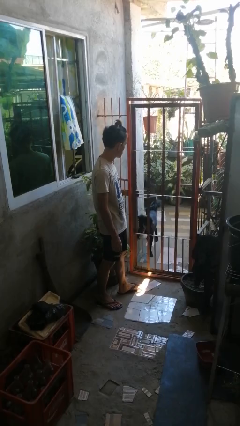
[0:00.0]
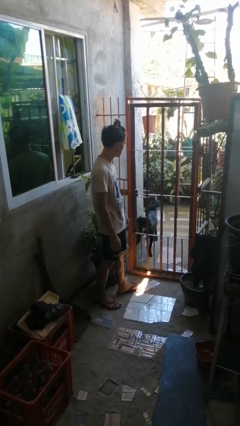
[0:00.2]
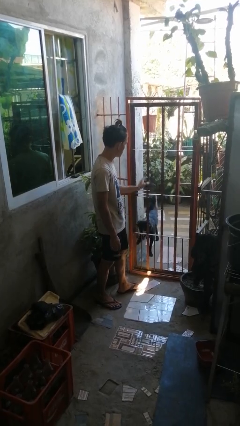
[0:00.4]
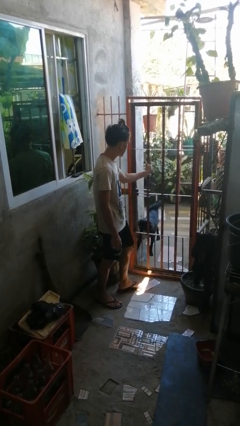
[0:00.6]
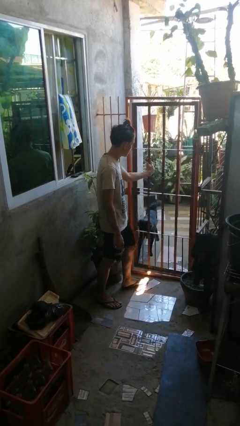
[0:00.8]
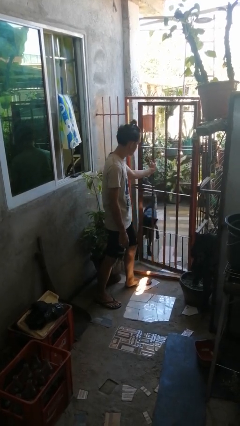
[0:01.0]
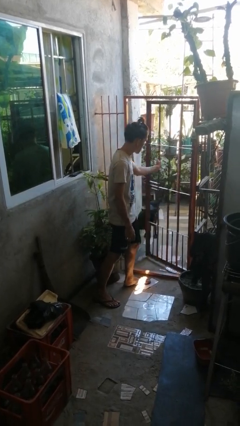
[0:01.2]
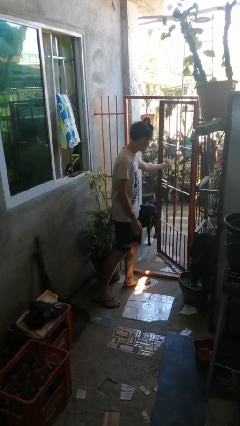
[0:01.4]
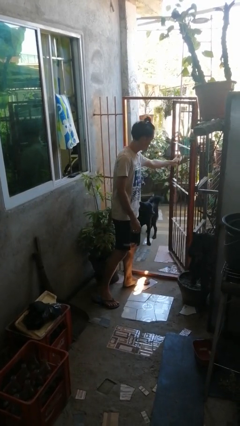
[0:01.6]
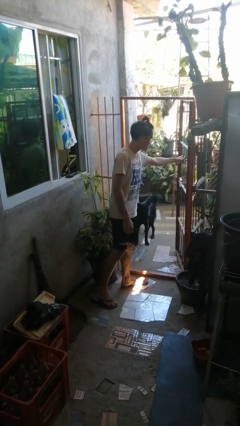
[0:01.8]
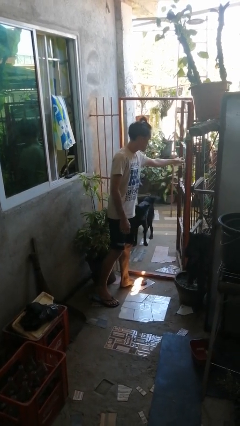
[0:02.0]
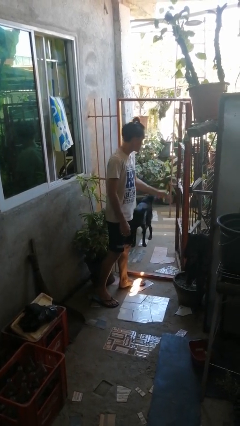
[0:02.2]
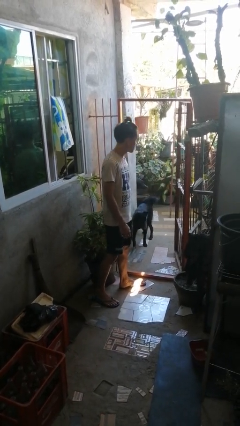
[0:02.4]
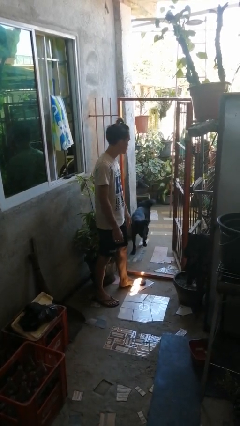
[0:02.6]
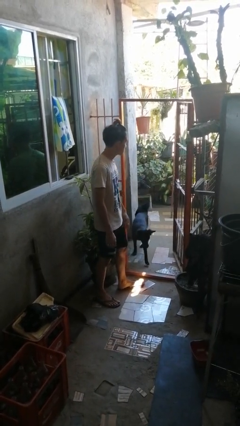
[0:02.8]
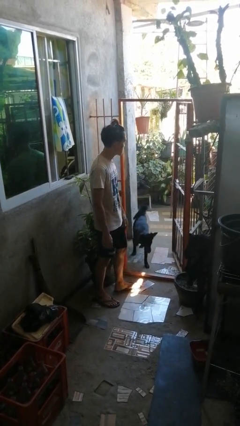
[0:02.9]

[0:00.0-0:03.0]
person opens gate

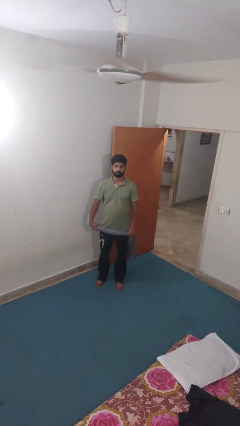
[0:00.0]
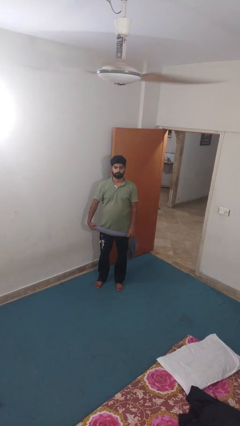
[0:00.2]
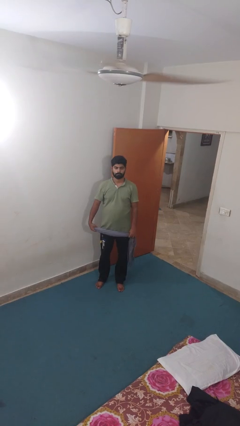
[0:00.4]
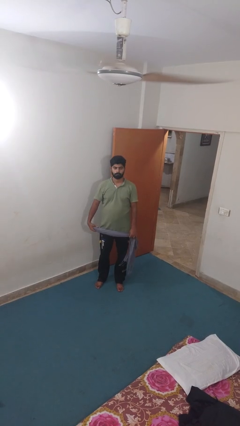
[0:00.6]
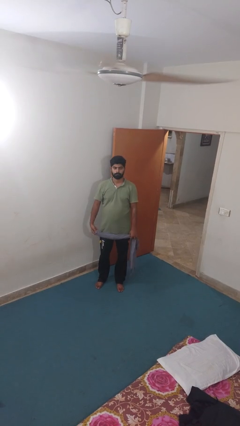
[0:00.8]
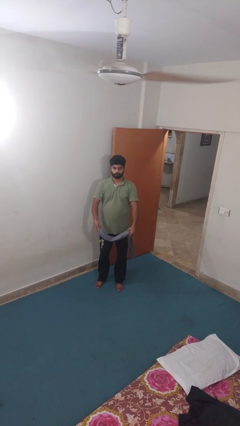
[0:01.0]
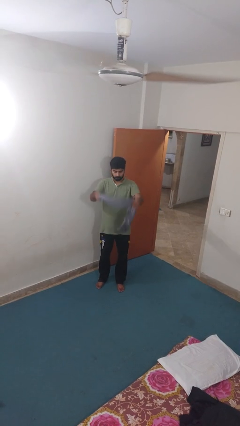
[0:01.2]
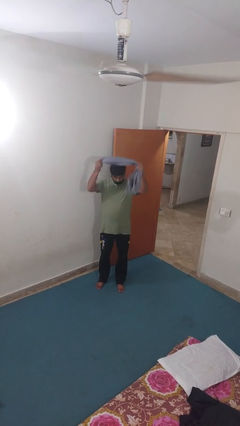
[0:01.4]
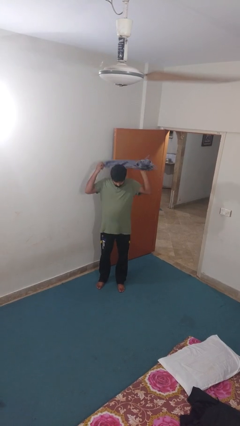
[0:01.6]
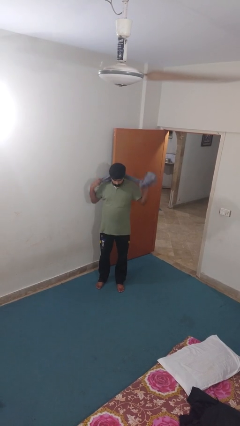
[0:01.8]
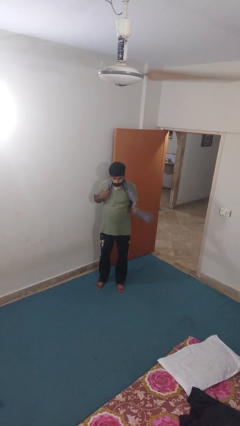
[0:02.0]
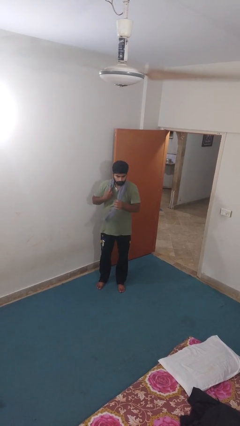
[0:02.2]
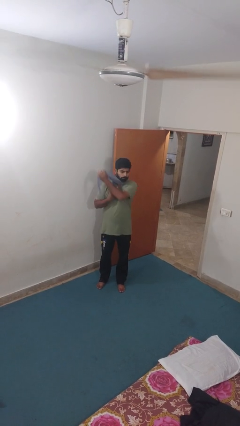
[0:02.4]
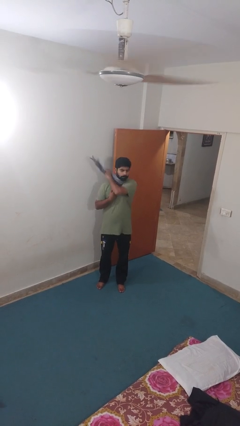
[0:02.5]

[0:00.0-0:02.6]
person puts on scarf

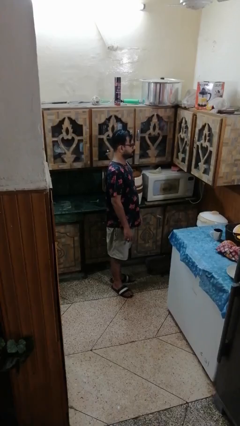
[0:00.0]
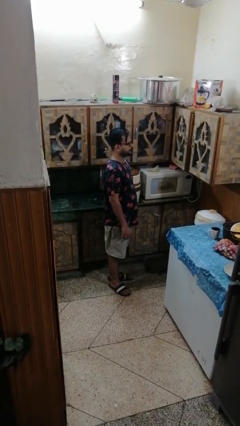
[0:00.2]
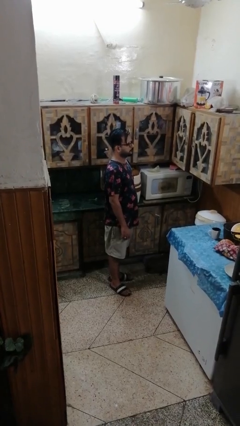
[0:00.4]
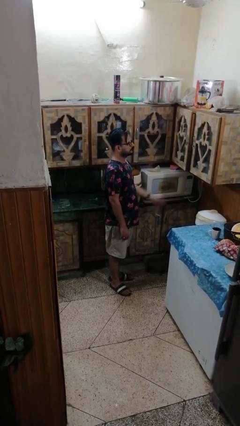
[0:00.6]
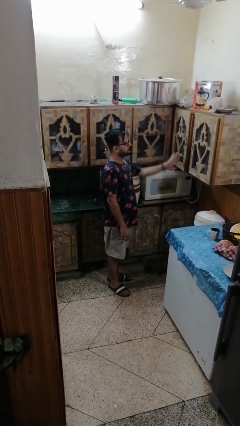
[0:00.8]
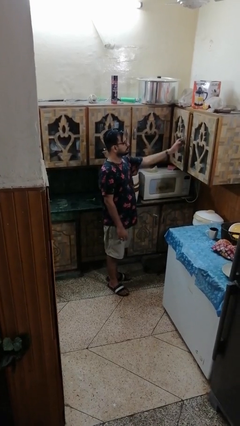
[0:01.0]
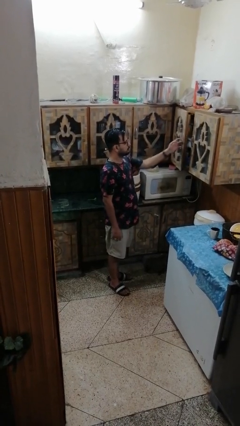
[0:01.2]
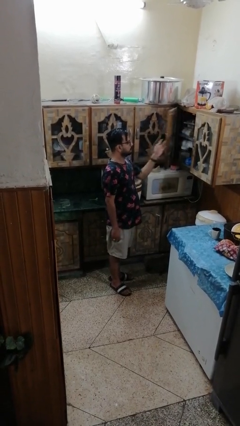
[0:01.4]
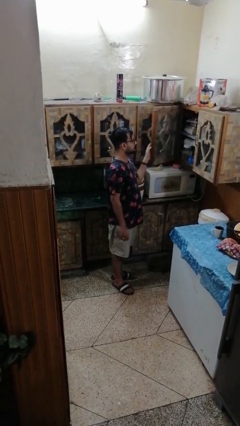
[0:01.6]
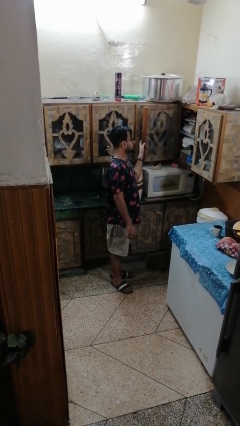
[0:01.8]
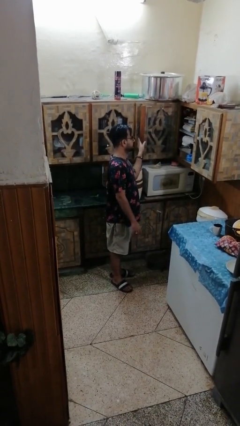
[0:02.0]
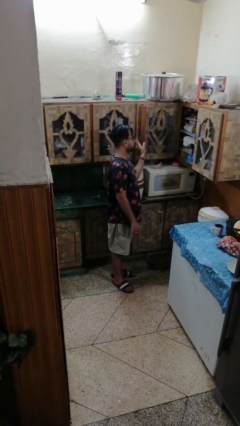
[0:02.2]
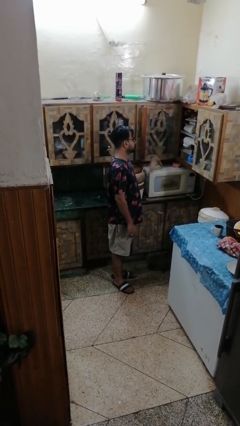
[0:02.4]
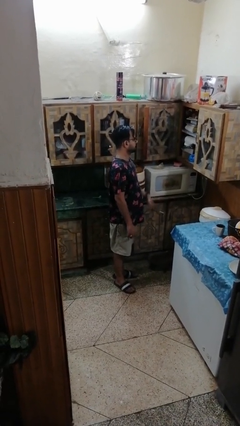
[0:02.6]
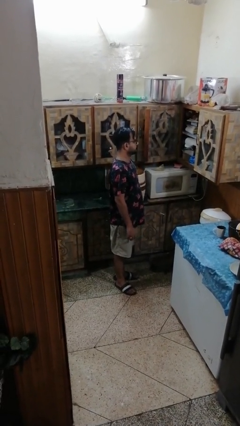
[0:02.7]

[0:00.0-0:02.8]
person opens cabinet

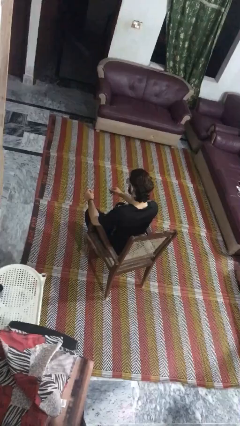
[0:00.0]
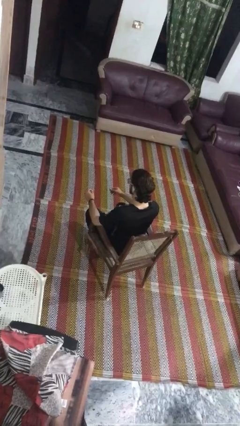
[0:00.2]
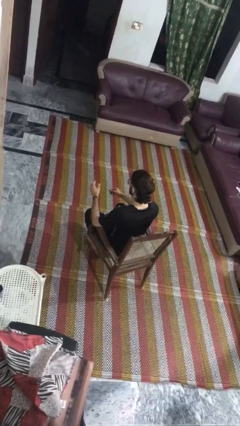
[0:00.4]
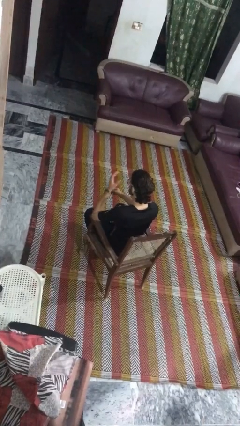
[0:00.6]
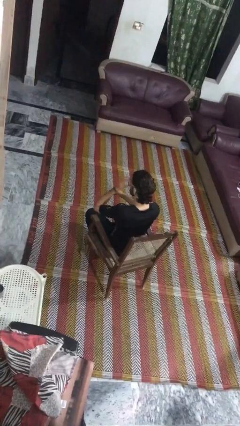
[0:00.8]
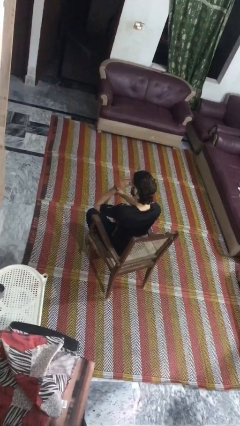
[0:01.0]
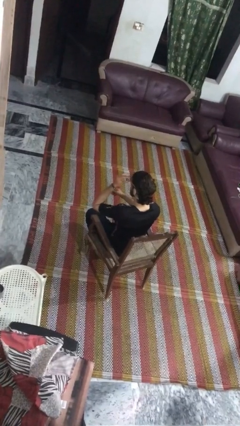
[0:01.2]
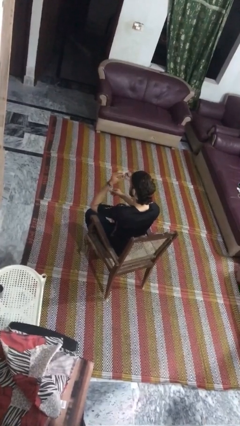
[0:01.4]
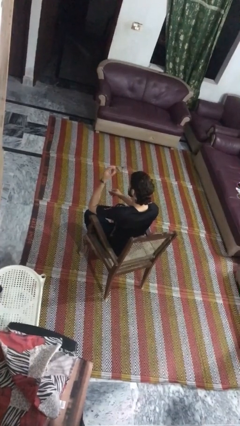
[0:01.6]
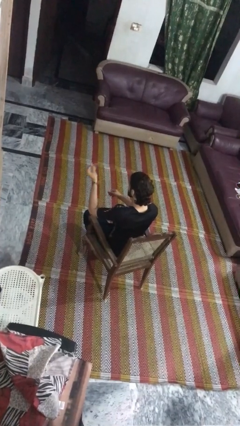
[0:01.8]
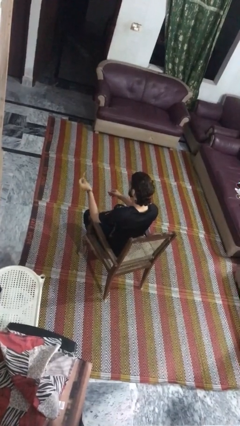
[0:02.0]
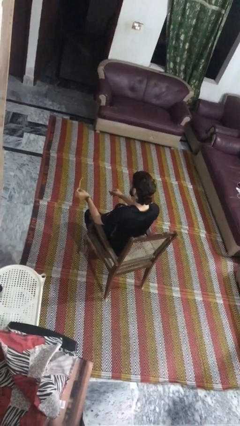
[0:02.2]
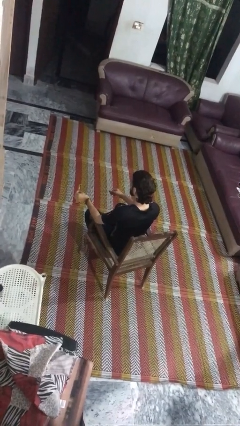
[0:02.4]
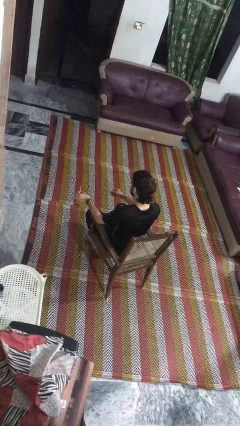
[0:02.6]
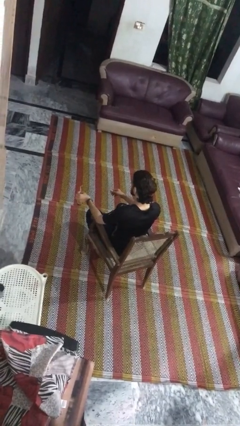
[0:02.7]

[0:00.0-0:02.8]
person takes off glasses

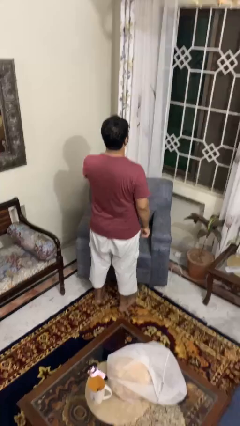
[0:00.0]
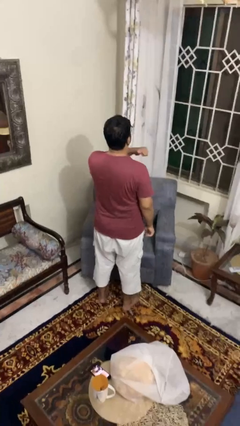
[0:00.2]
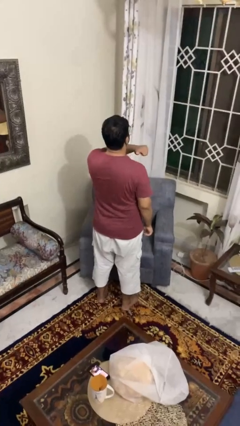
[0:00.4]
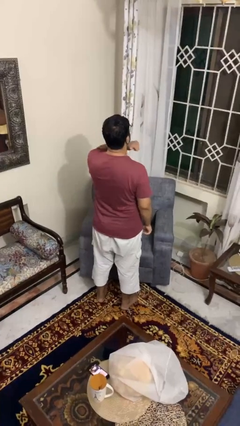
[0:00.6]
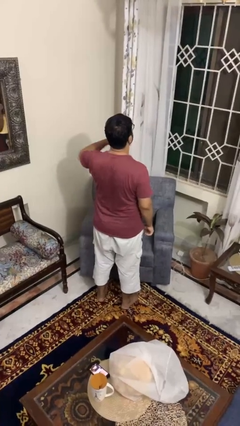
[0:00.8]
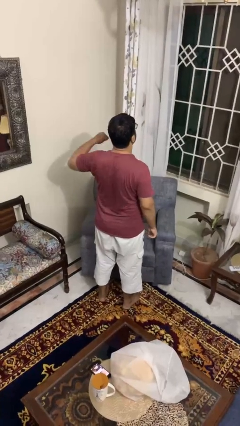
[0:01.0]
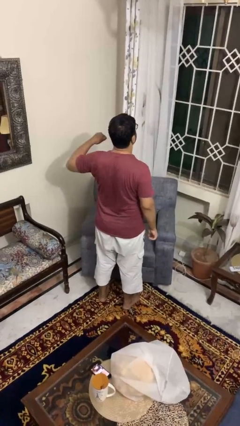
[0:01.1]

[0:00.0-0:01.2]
person gestures cut

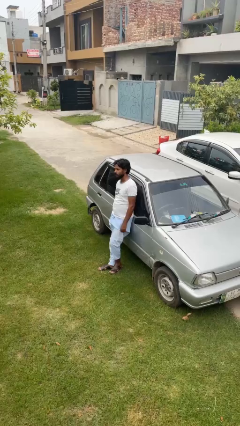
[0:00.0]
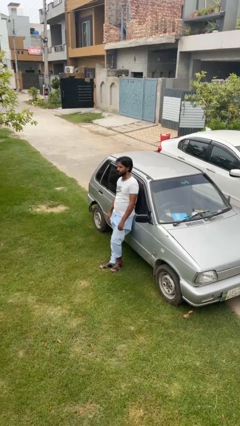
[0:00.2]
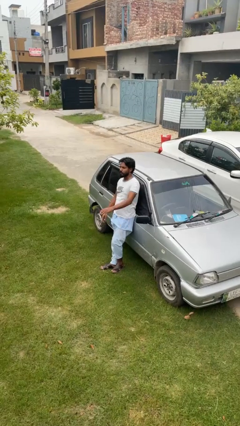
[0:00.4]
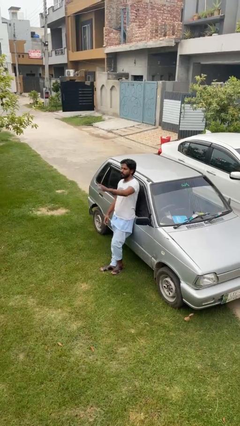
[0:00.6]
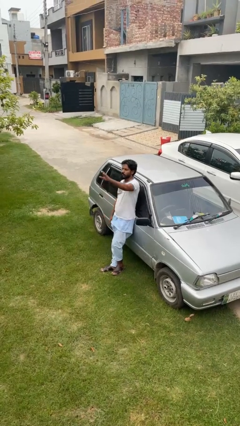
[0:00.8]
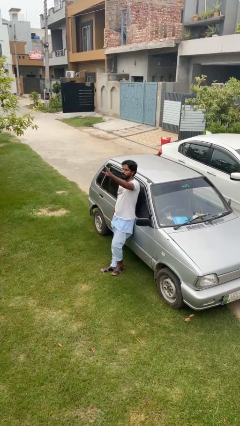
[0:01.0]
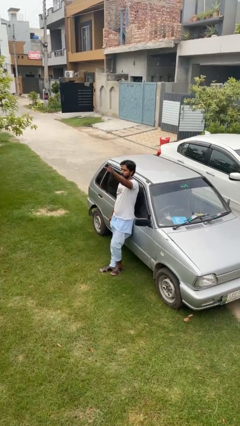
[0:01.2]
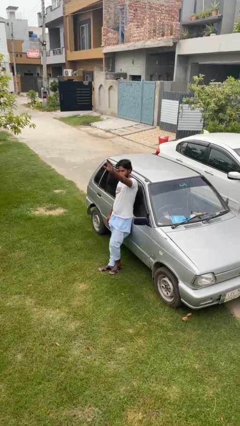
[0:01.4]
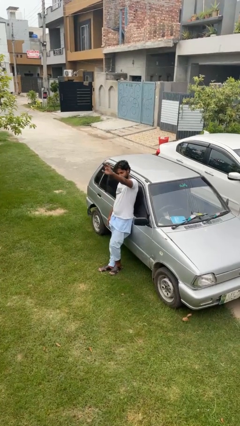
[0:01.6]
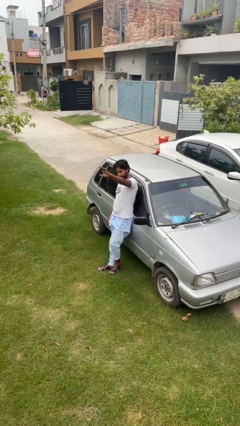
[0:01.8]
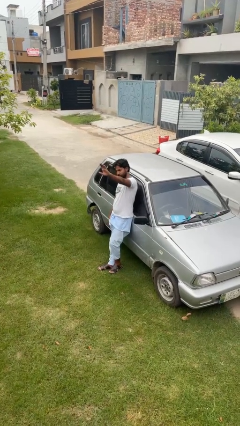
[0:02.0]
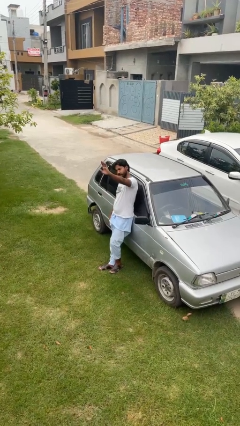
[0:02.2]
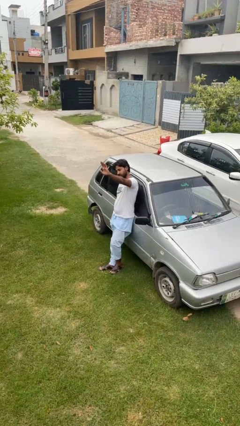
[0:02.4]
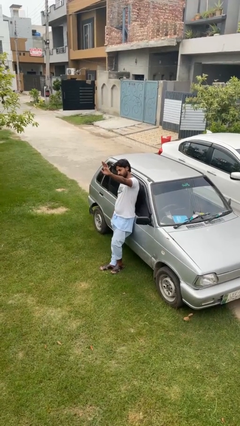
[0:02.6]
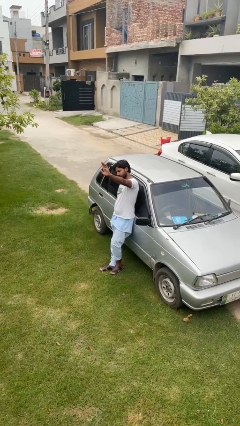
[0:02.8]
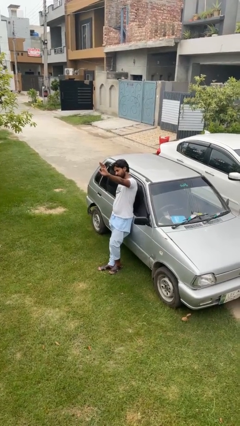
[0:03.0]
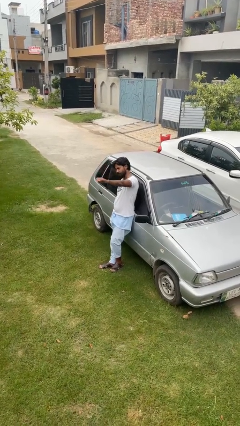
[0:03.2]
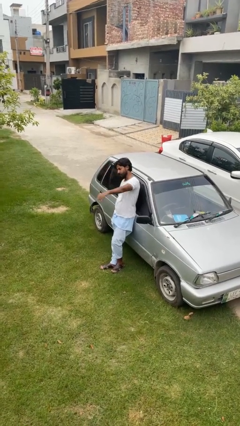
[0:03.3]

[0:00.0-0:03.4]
person gestures raise hand

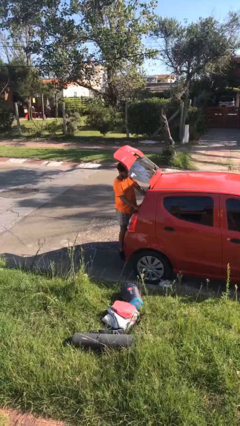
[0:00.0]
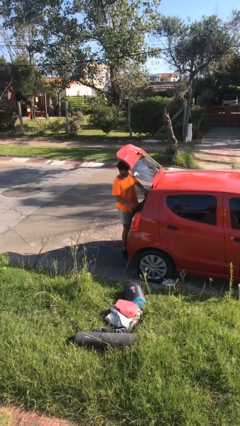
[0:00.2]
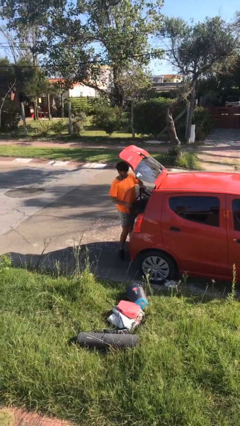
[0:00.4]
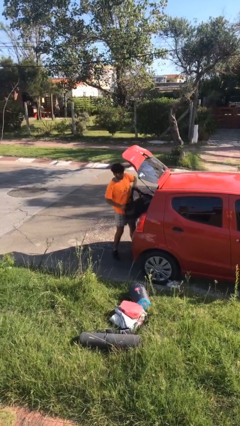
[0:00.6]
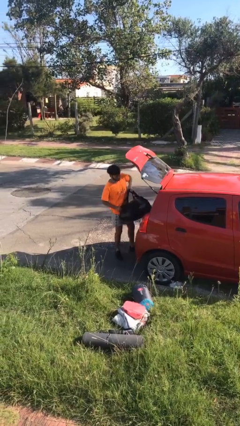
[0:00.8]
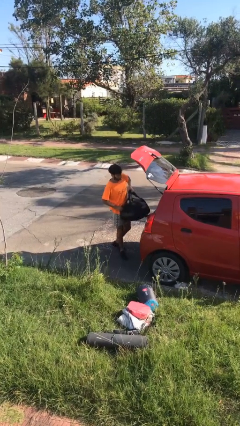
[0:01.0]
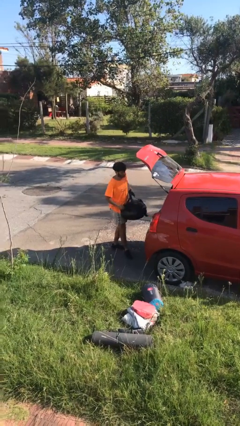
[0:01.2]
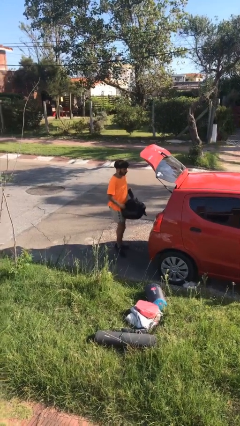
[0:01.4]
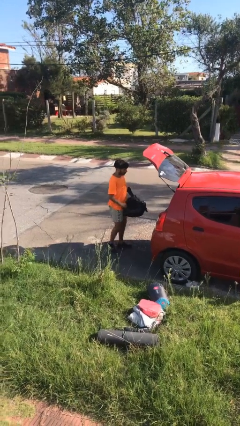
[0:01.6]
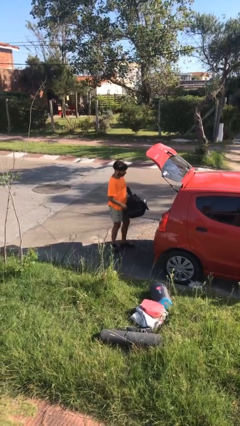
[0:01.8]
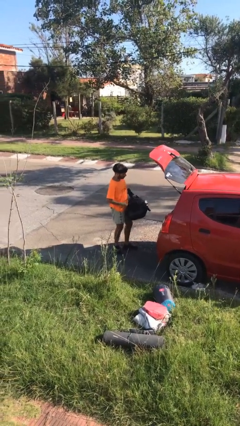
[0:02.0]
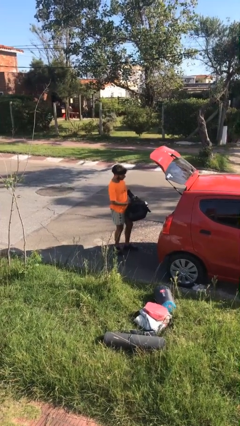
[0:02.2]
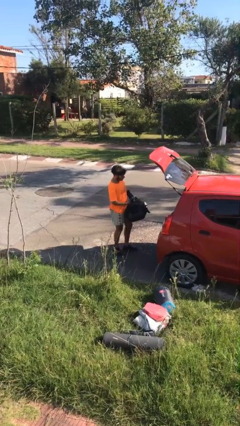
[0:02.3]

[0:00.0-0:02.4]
person unloads car
